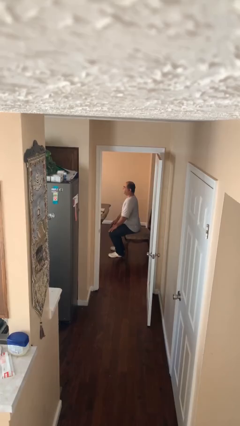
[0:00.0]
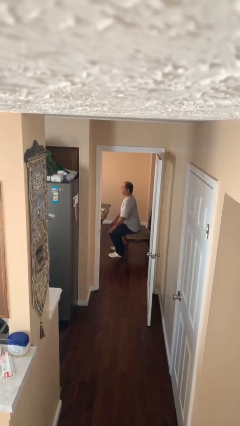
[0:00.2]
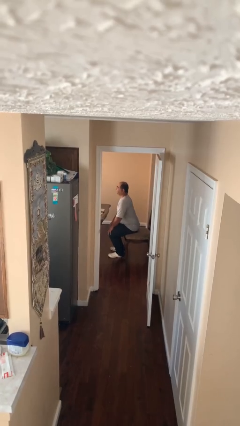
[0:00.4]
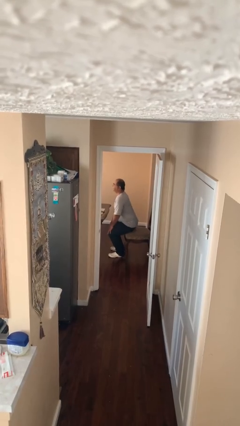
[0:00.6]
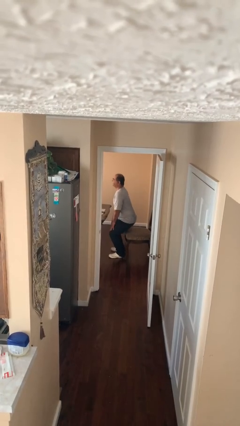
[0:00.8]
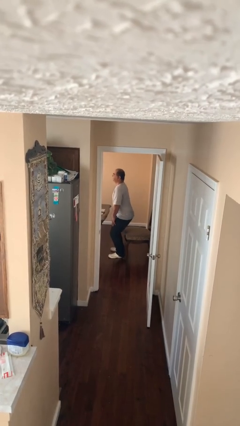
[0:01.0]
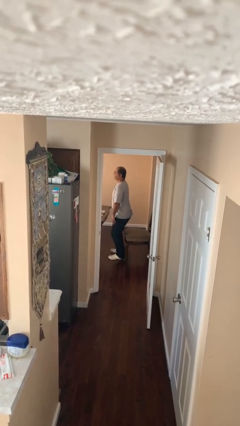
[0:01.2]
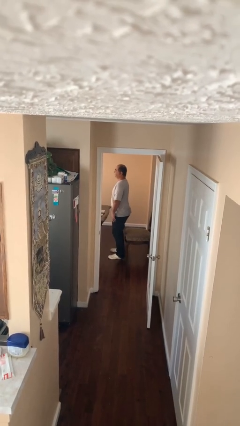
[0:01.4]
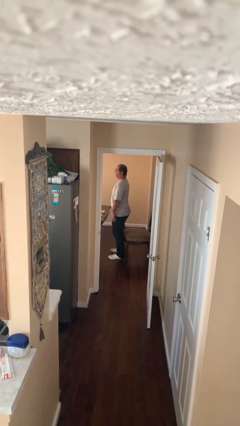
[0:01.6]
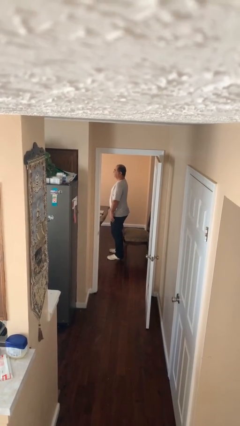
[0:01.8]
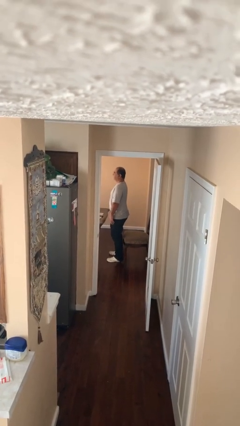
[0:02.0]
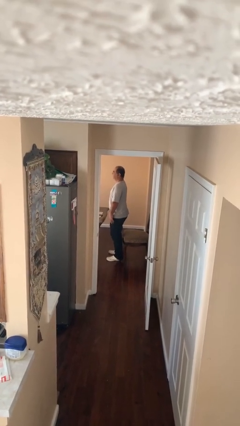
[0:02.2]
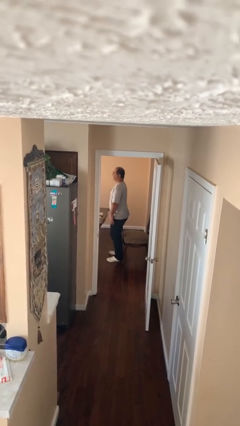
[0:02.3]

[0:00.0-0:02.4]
person stands up

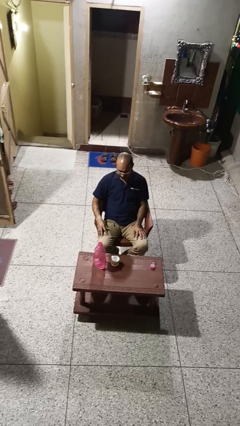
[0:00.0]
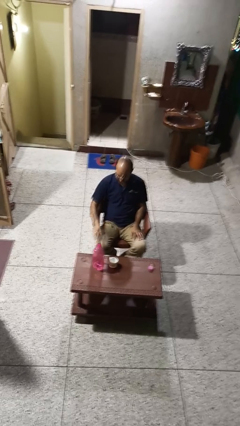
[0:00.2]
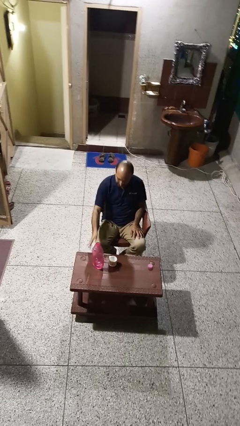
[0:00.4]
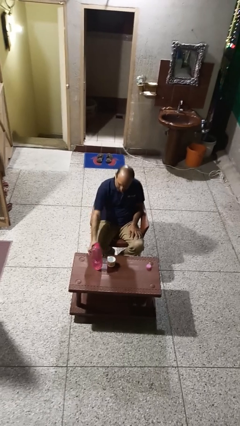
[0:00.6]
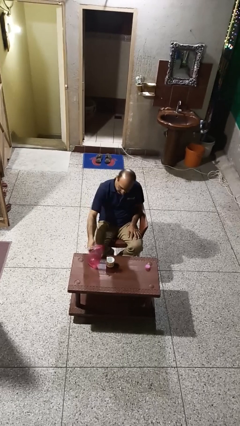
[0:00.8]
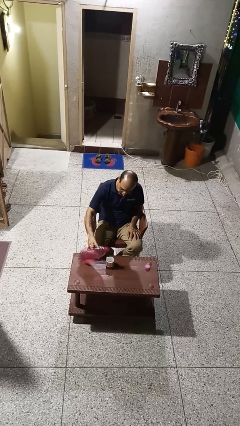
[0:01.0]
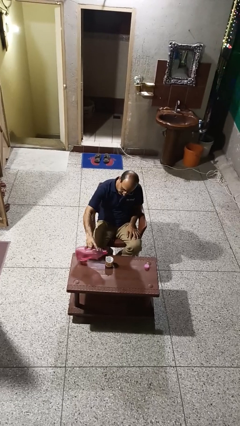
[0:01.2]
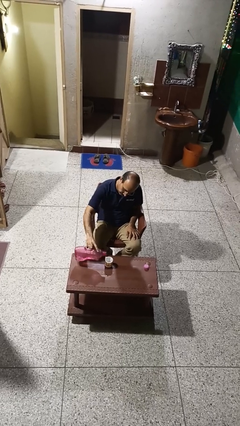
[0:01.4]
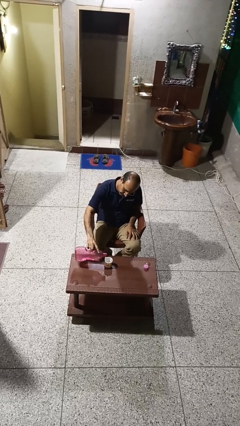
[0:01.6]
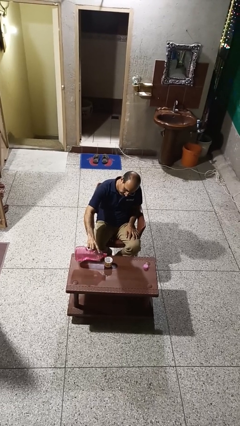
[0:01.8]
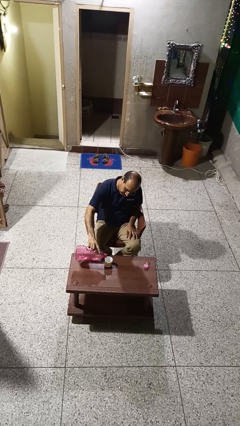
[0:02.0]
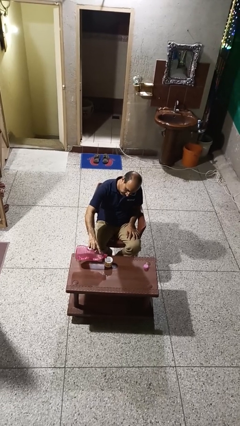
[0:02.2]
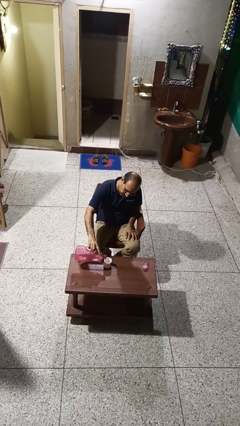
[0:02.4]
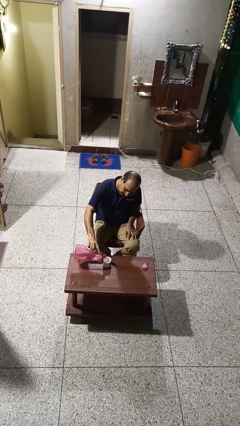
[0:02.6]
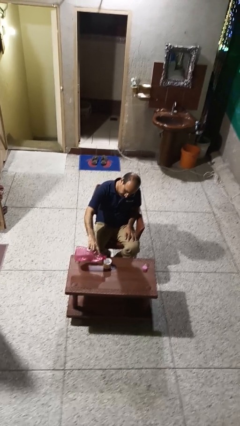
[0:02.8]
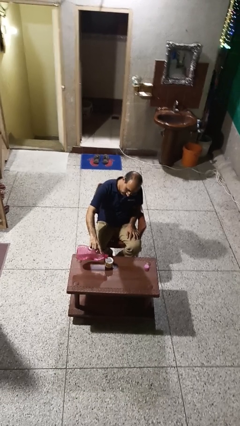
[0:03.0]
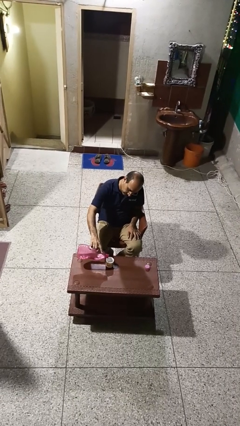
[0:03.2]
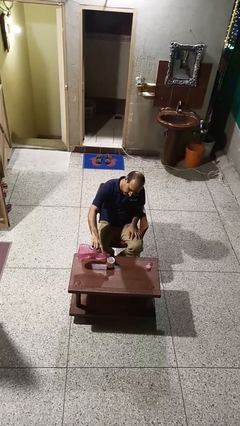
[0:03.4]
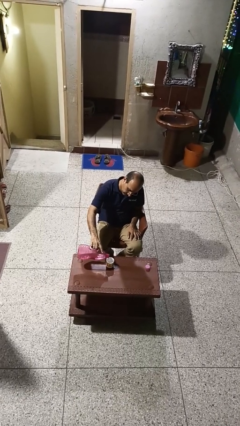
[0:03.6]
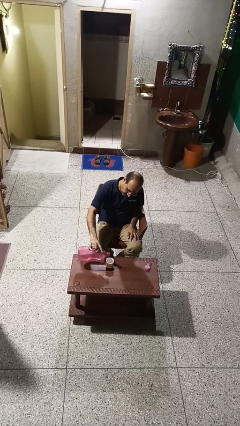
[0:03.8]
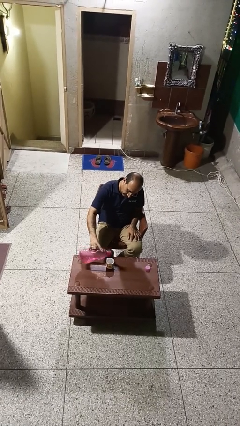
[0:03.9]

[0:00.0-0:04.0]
person pours liquid into cup

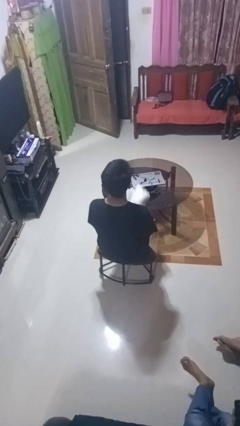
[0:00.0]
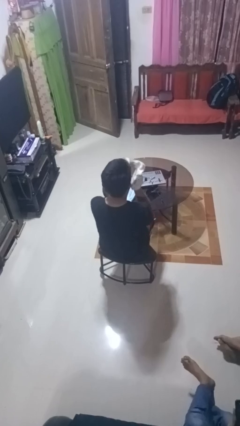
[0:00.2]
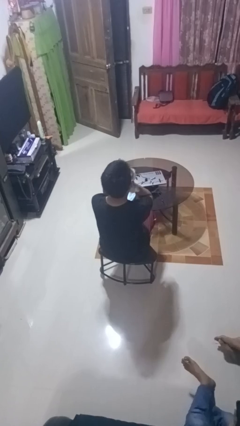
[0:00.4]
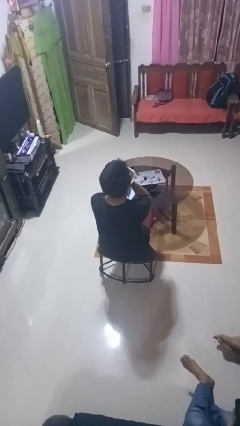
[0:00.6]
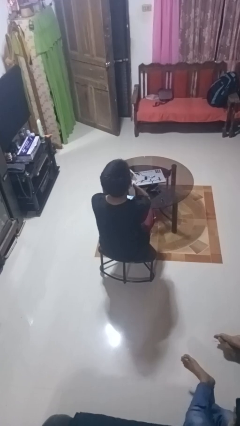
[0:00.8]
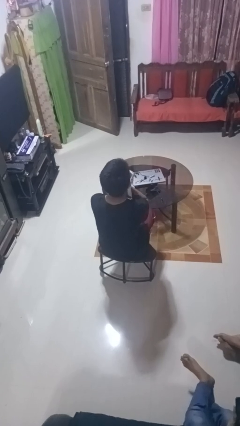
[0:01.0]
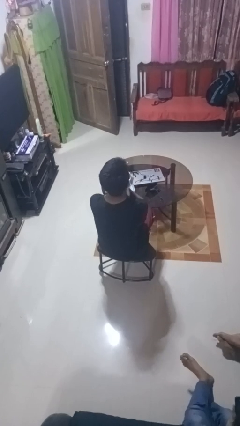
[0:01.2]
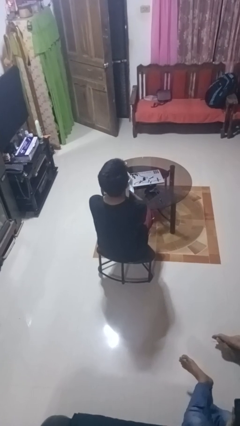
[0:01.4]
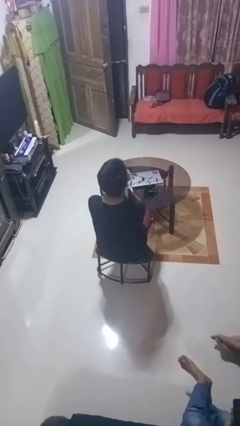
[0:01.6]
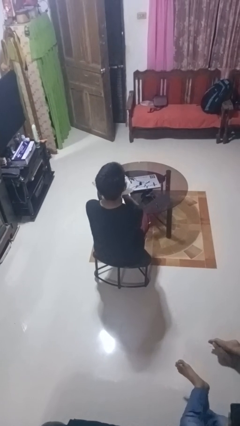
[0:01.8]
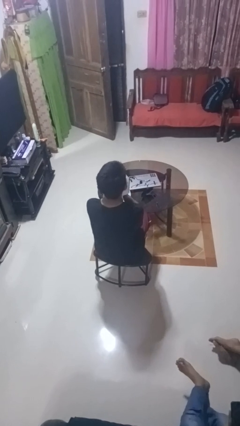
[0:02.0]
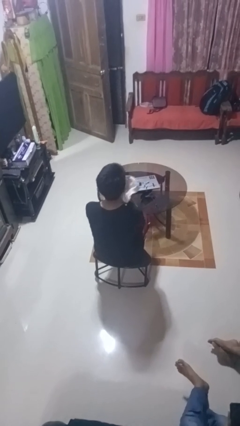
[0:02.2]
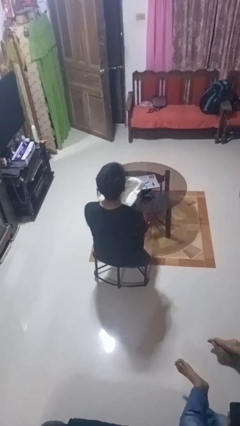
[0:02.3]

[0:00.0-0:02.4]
person wipes mouth with napkin

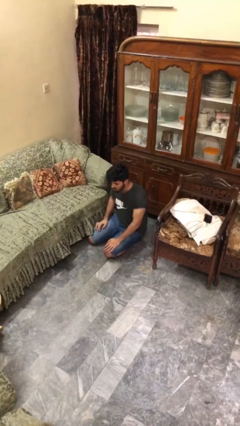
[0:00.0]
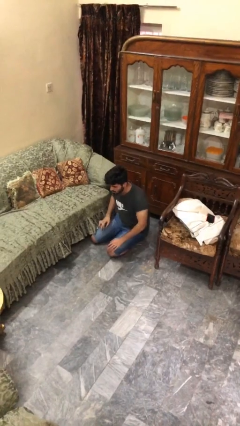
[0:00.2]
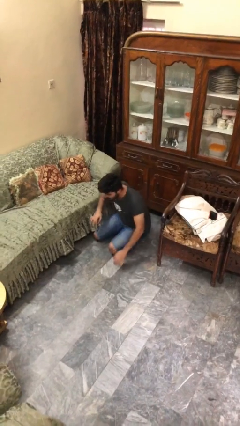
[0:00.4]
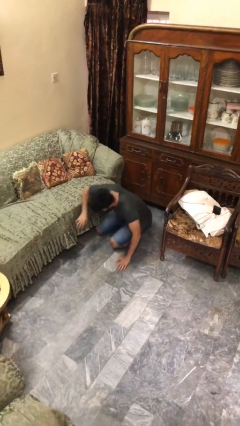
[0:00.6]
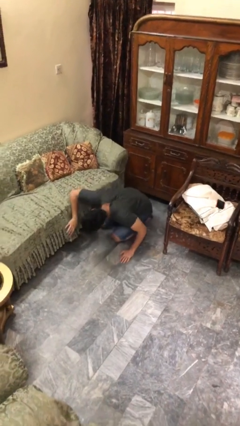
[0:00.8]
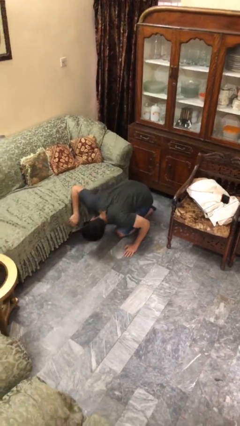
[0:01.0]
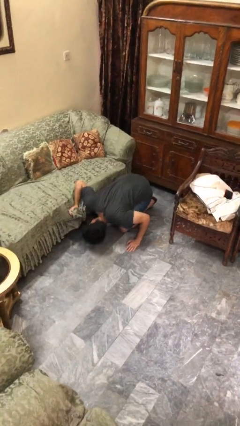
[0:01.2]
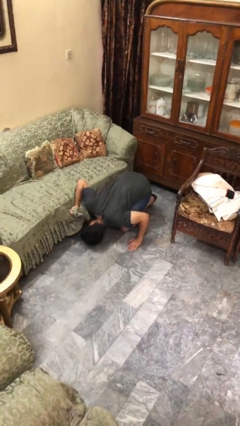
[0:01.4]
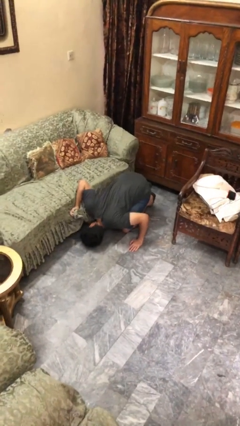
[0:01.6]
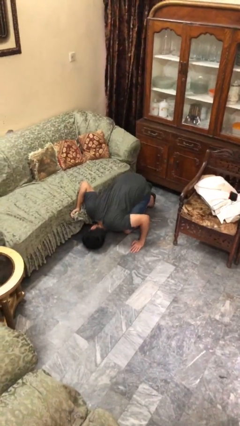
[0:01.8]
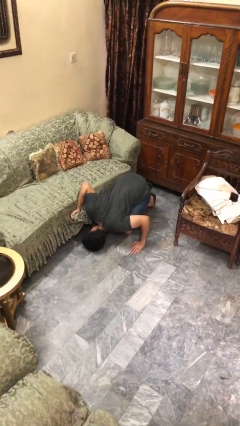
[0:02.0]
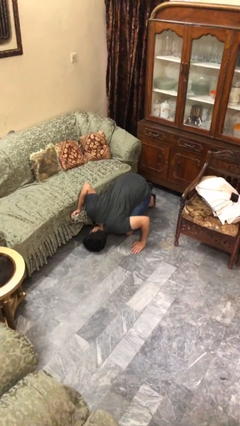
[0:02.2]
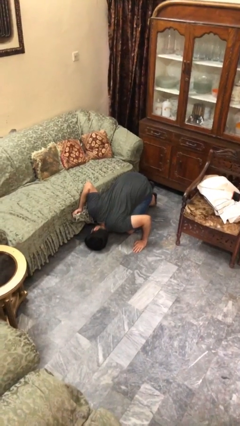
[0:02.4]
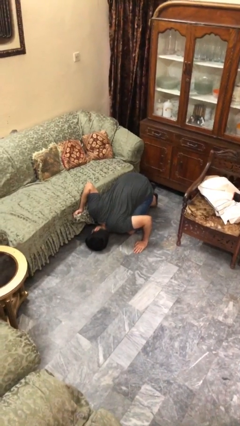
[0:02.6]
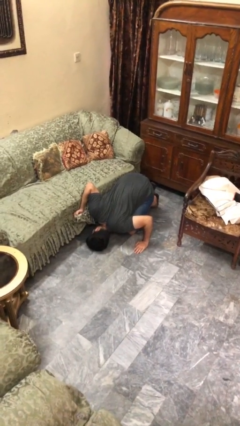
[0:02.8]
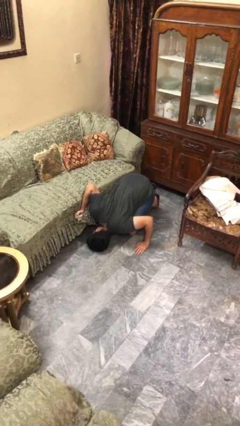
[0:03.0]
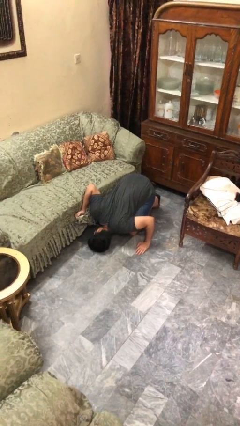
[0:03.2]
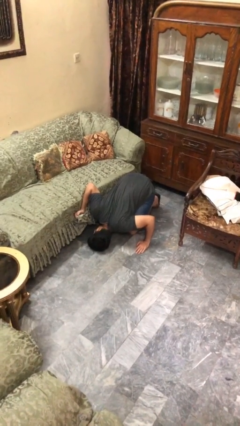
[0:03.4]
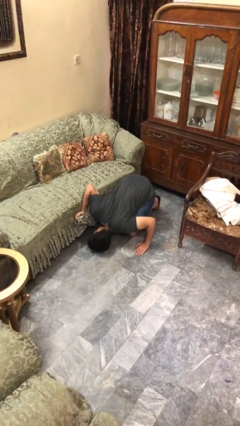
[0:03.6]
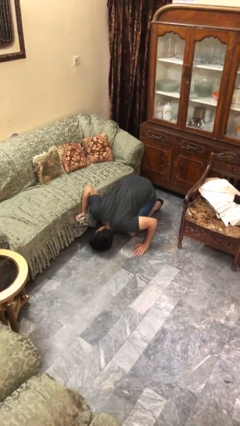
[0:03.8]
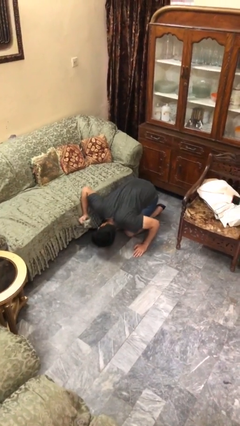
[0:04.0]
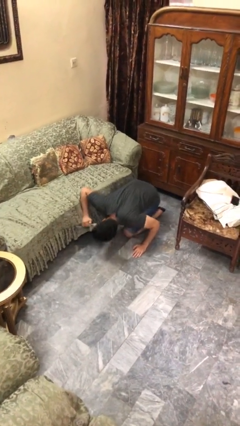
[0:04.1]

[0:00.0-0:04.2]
person searches under couch

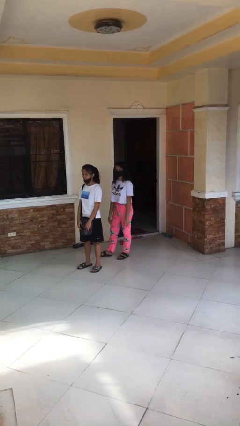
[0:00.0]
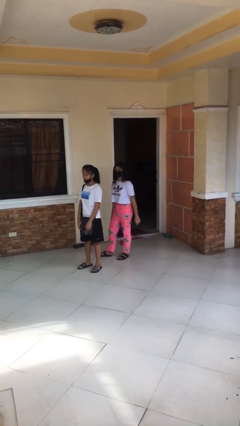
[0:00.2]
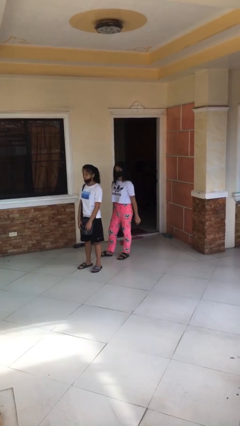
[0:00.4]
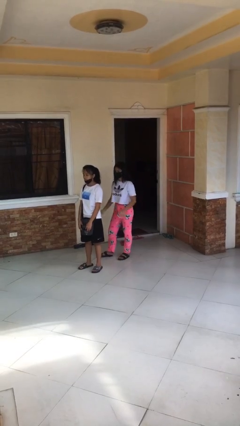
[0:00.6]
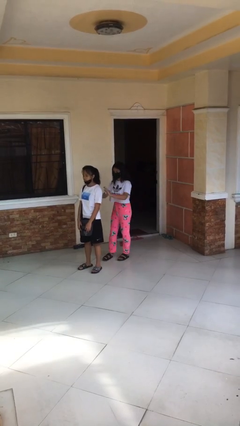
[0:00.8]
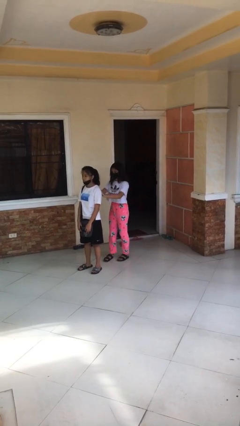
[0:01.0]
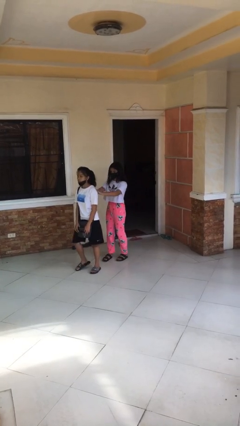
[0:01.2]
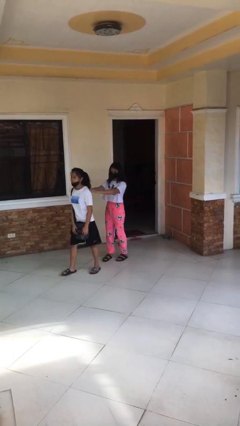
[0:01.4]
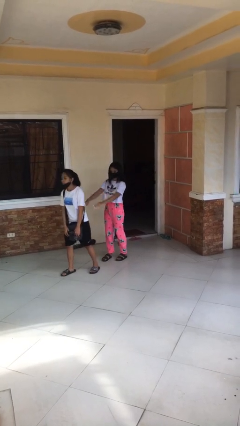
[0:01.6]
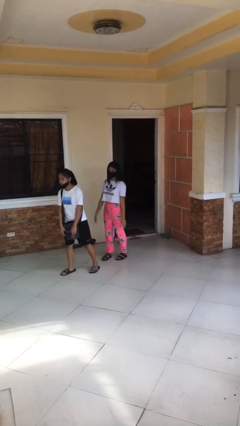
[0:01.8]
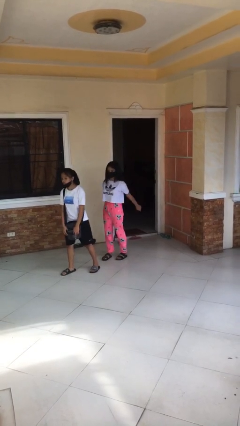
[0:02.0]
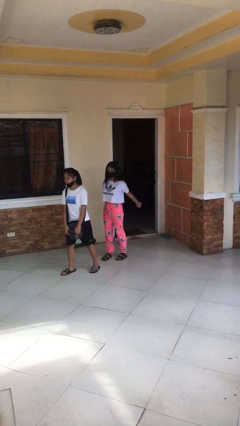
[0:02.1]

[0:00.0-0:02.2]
person shoves person

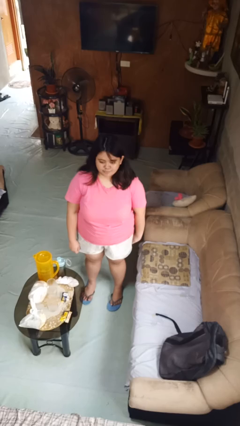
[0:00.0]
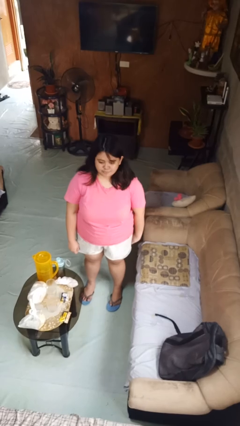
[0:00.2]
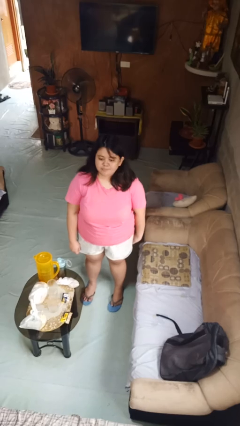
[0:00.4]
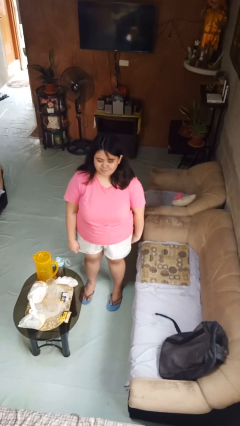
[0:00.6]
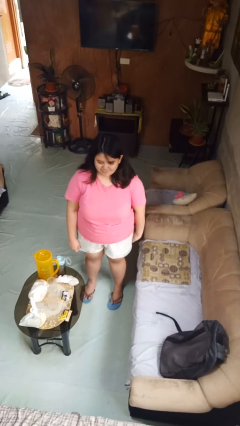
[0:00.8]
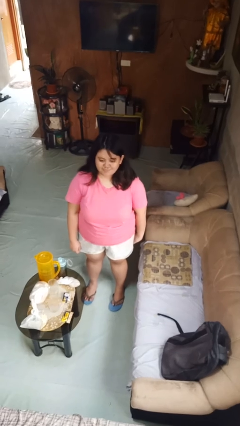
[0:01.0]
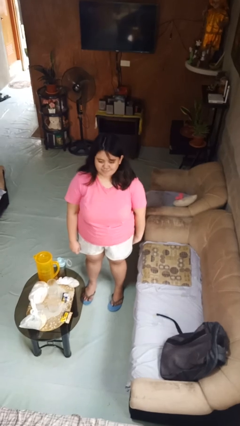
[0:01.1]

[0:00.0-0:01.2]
person nods head

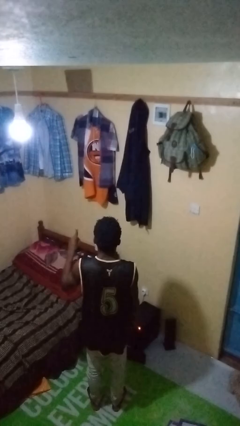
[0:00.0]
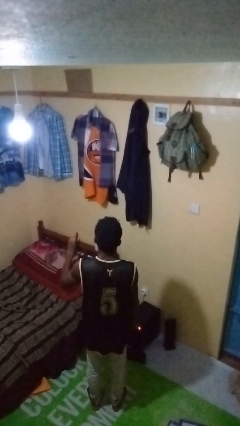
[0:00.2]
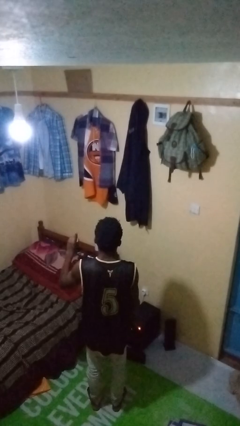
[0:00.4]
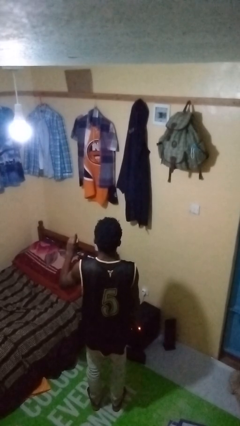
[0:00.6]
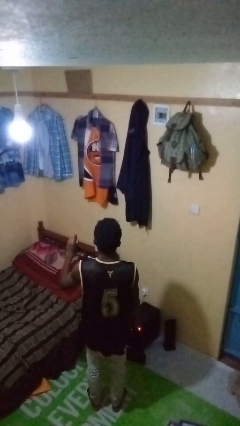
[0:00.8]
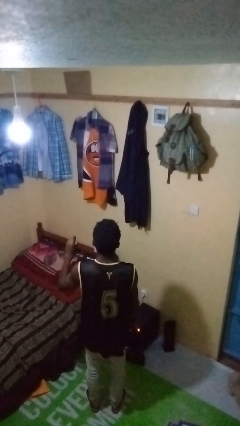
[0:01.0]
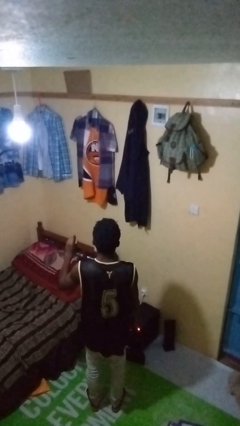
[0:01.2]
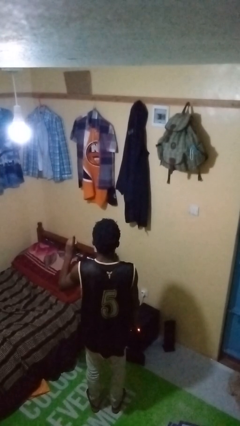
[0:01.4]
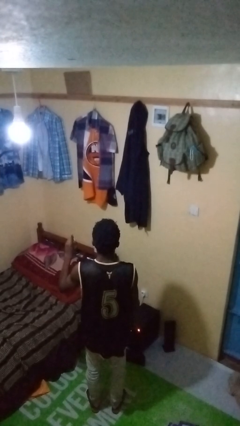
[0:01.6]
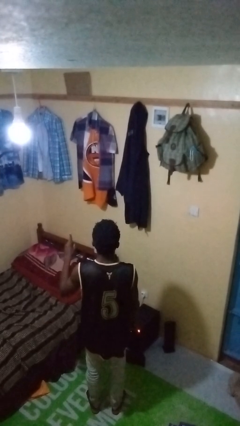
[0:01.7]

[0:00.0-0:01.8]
person gestures number one
